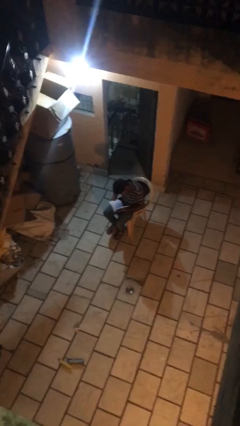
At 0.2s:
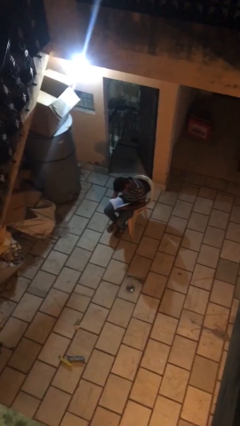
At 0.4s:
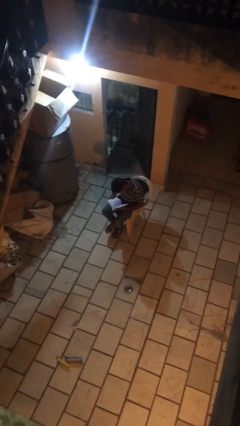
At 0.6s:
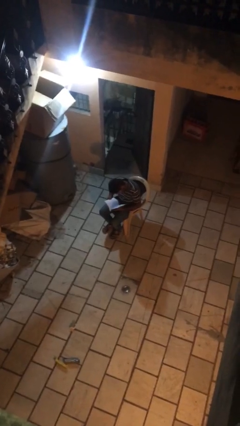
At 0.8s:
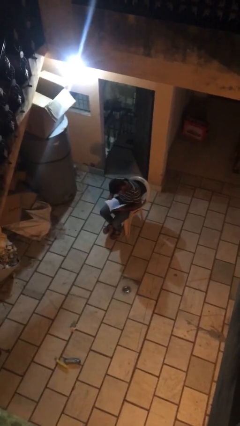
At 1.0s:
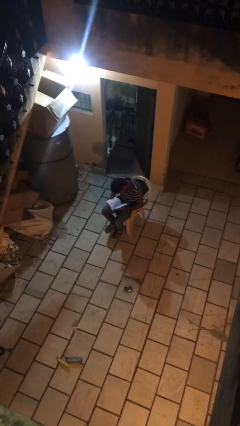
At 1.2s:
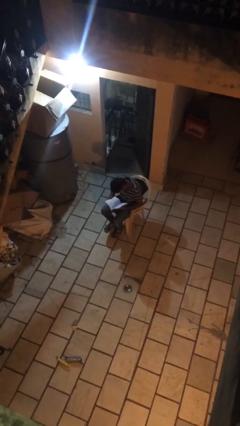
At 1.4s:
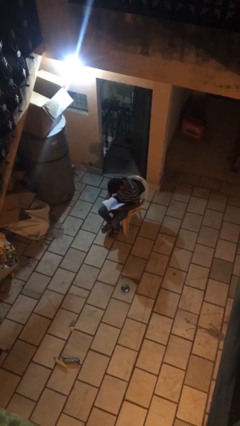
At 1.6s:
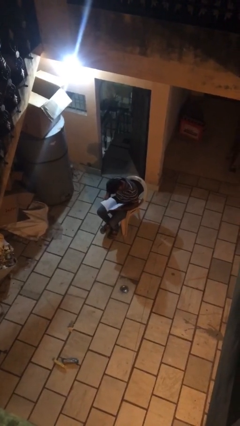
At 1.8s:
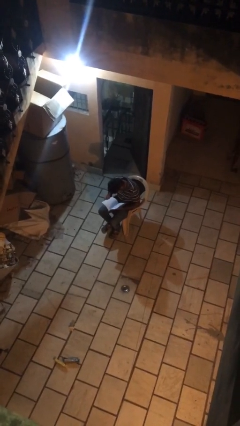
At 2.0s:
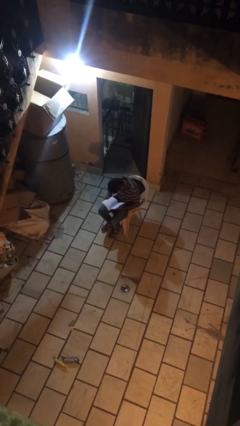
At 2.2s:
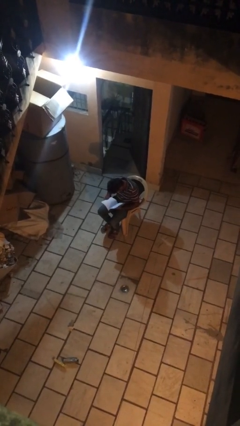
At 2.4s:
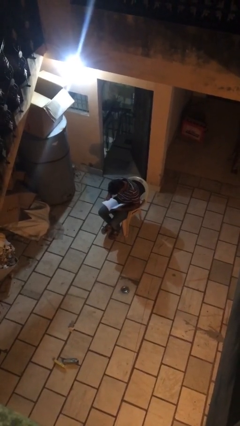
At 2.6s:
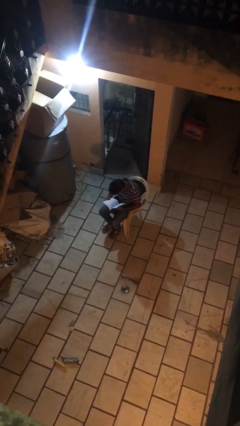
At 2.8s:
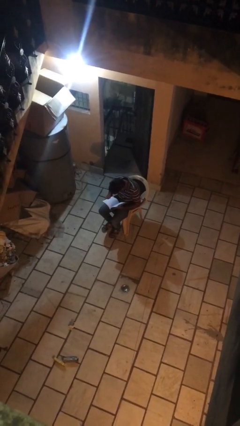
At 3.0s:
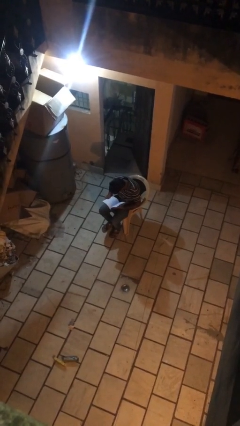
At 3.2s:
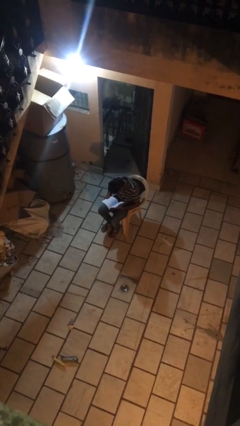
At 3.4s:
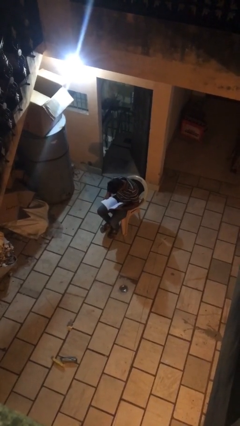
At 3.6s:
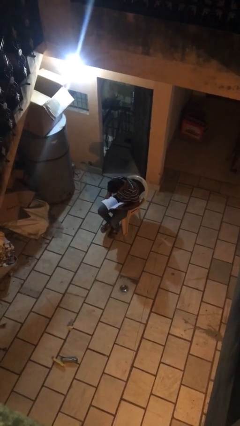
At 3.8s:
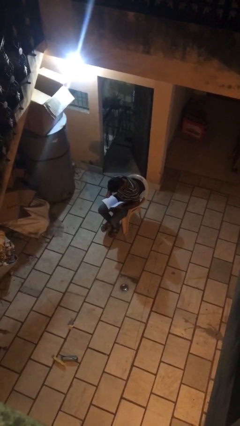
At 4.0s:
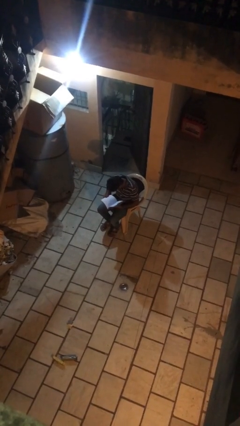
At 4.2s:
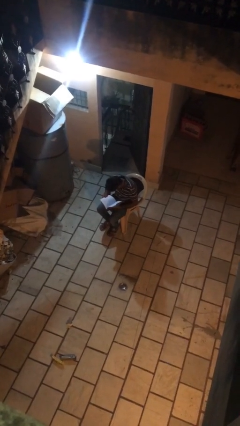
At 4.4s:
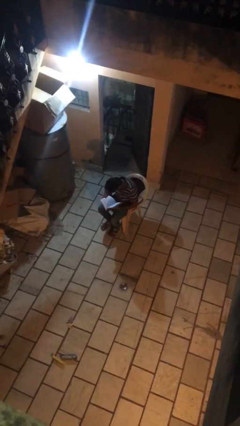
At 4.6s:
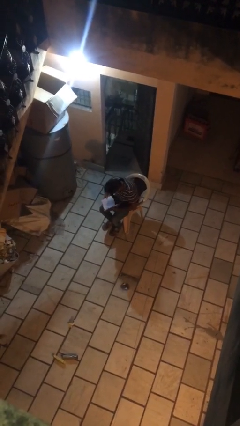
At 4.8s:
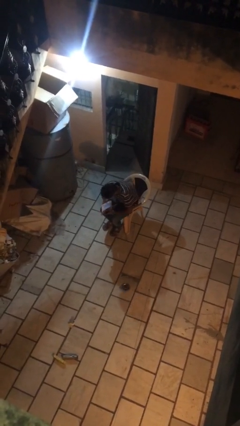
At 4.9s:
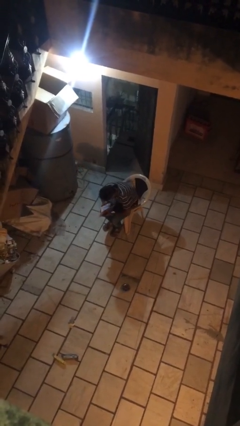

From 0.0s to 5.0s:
person reads document

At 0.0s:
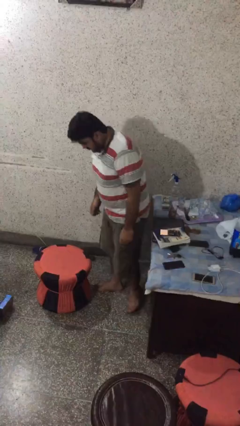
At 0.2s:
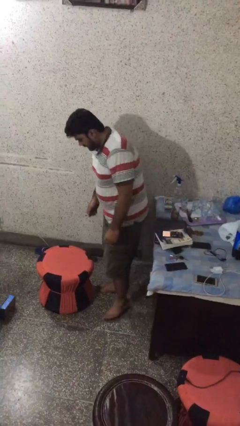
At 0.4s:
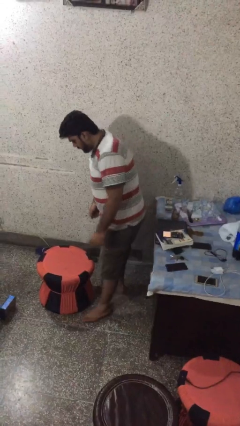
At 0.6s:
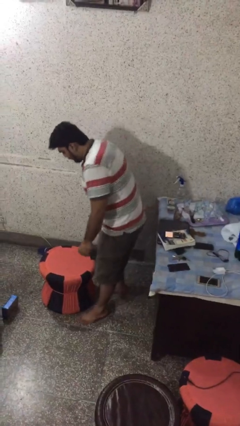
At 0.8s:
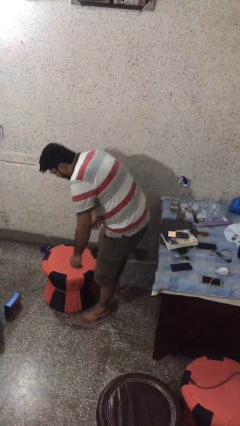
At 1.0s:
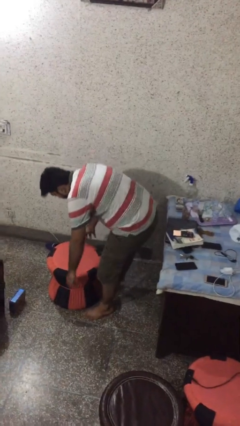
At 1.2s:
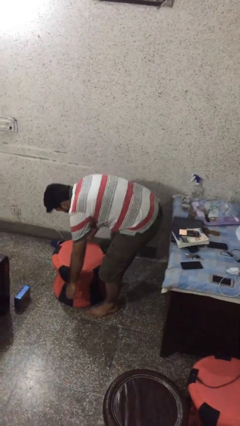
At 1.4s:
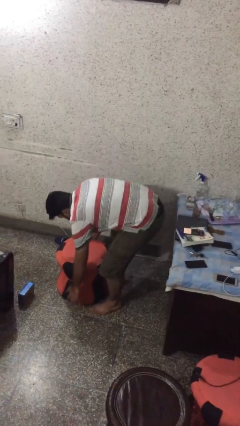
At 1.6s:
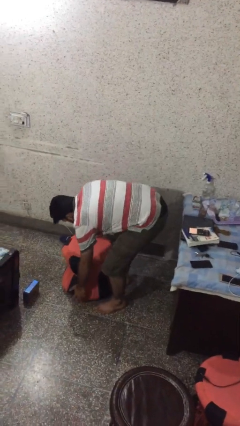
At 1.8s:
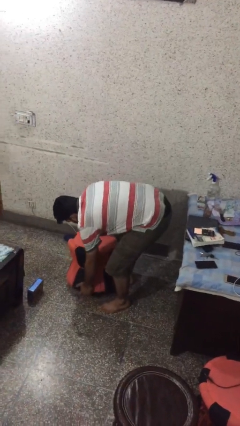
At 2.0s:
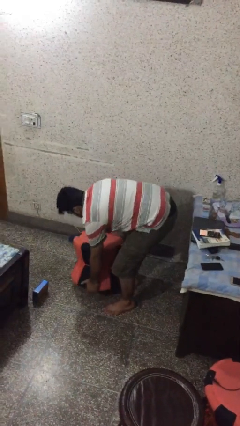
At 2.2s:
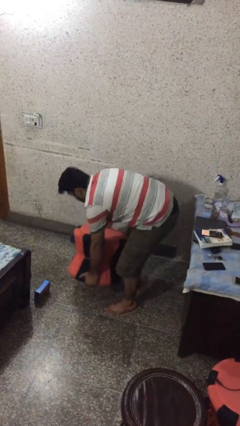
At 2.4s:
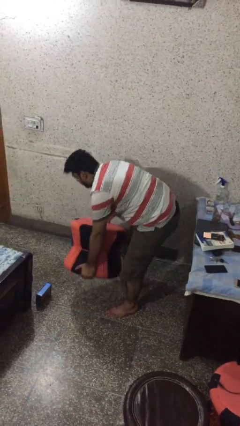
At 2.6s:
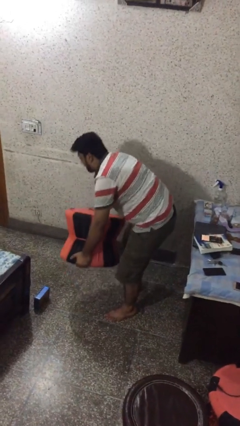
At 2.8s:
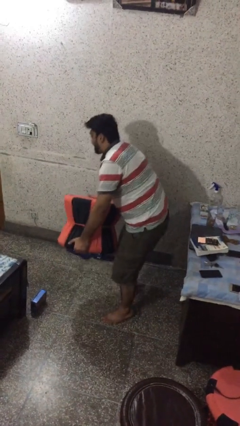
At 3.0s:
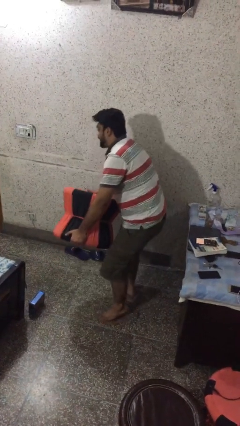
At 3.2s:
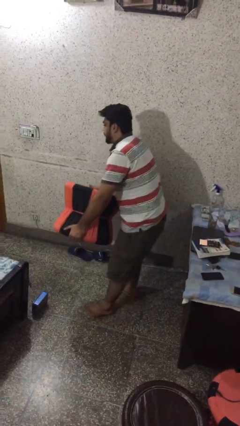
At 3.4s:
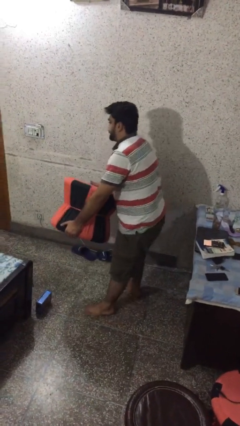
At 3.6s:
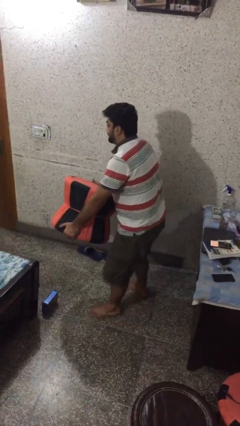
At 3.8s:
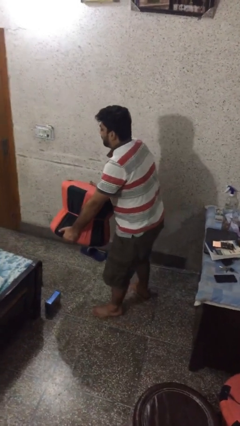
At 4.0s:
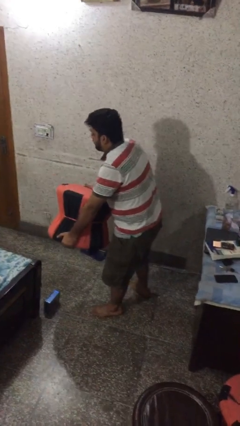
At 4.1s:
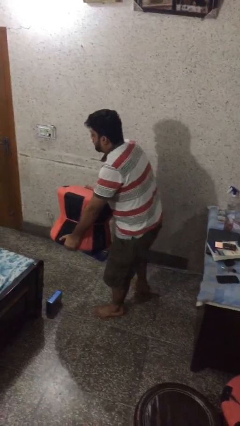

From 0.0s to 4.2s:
person picks up object from floor

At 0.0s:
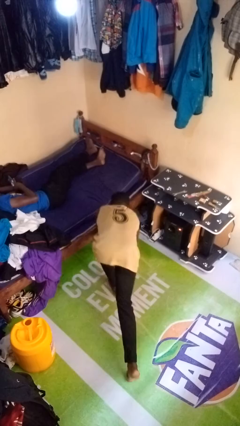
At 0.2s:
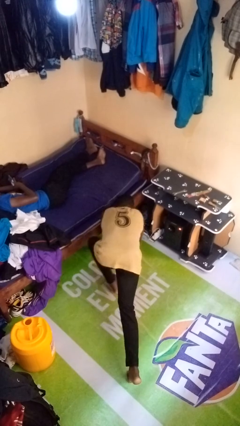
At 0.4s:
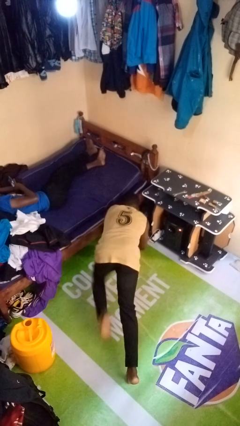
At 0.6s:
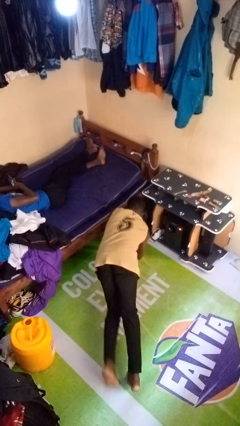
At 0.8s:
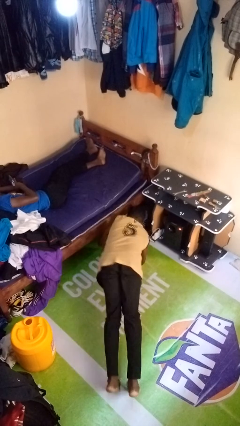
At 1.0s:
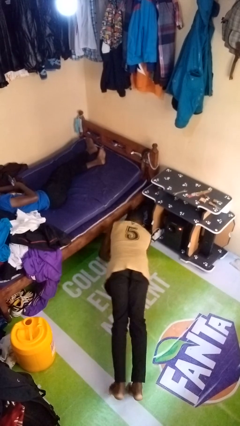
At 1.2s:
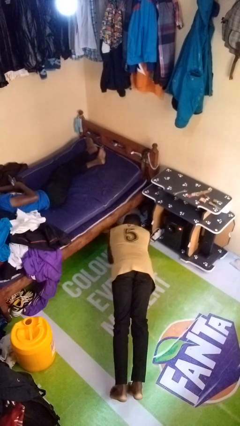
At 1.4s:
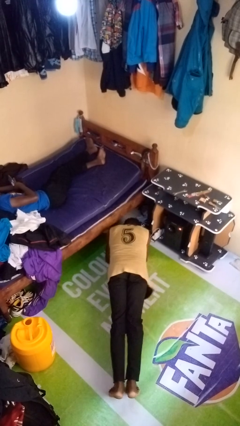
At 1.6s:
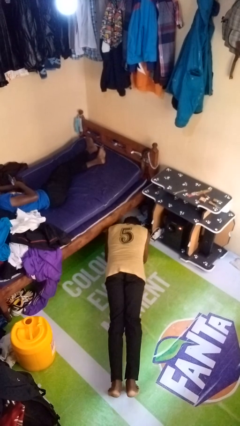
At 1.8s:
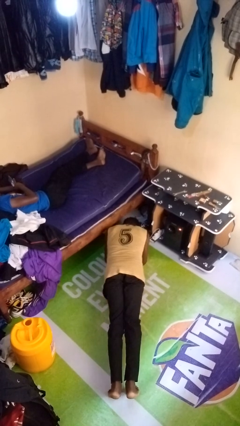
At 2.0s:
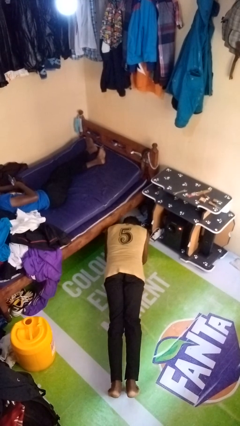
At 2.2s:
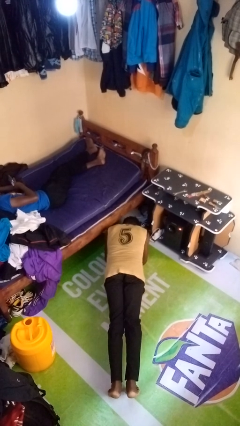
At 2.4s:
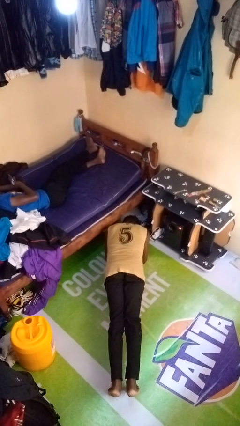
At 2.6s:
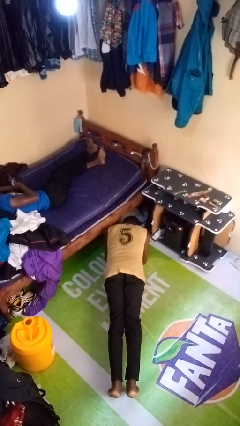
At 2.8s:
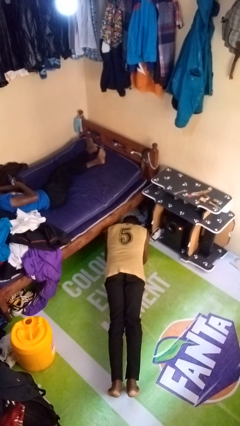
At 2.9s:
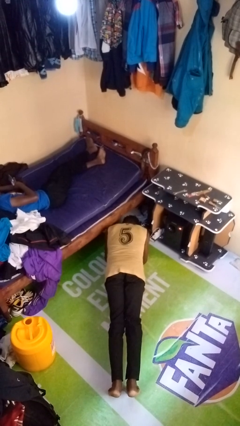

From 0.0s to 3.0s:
person exercises with plank

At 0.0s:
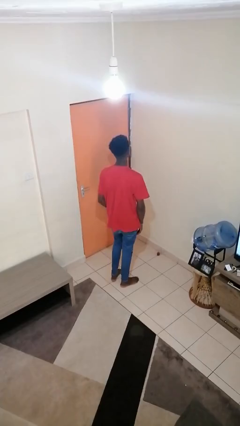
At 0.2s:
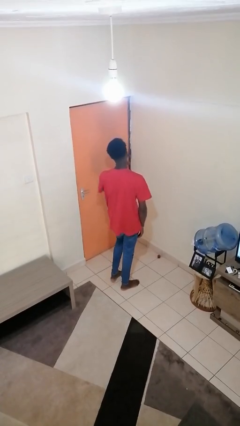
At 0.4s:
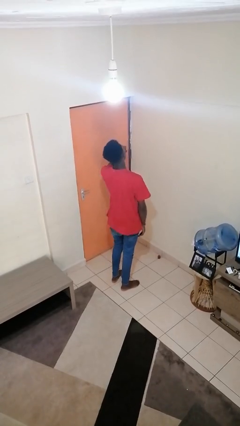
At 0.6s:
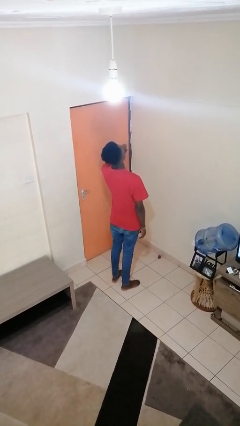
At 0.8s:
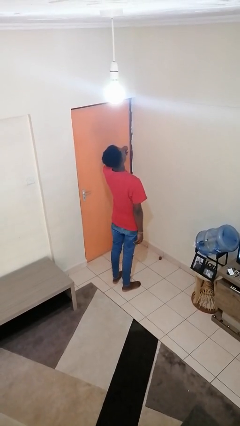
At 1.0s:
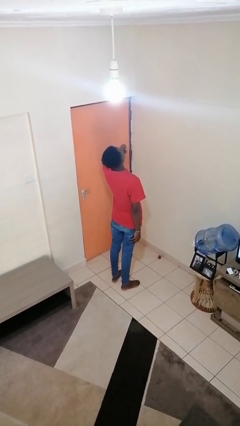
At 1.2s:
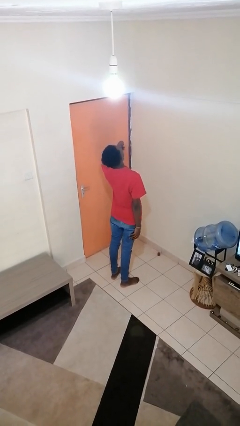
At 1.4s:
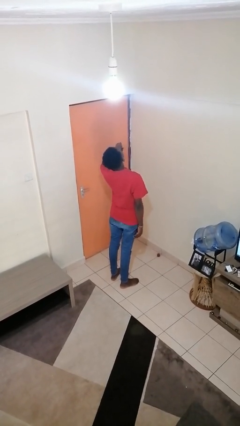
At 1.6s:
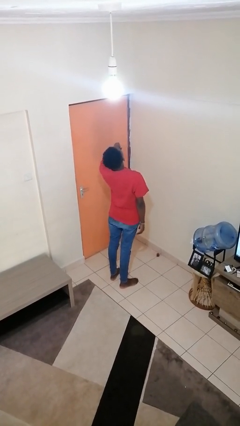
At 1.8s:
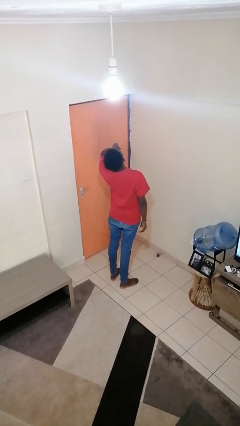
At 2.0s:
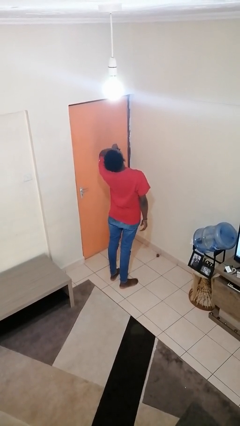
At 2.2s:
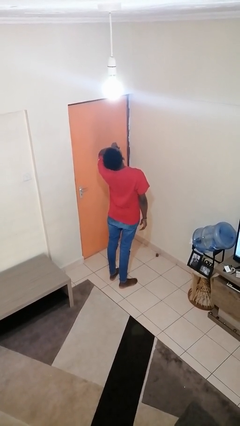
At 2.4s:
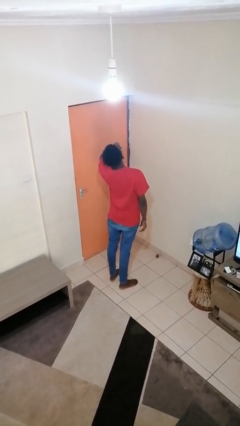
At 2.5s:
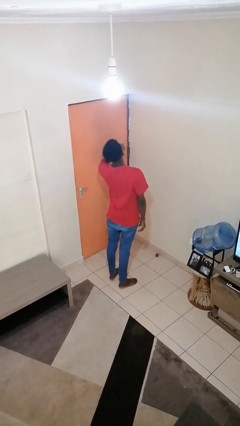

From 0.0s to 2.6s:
person yawns

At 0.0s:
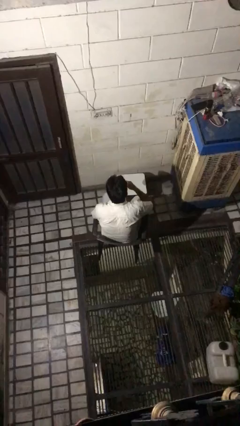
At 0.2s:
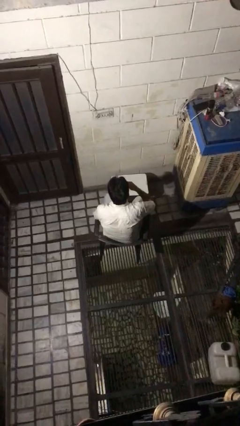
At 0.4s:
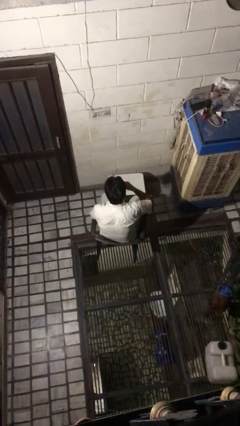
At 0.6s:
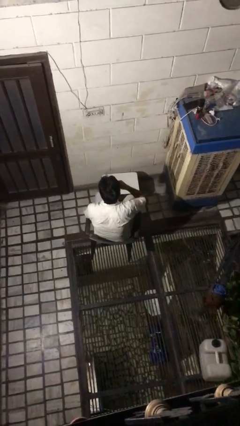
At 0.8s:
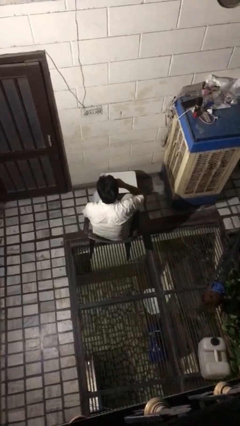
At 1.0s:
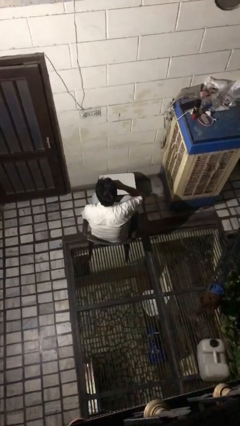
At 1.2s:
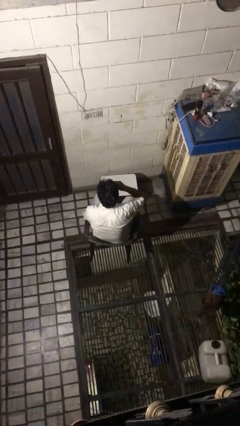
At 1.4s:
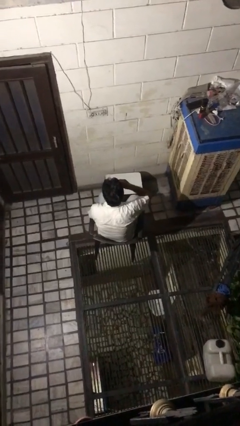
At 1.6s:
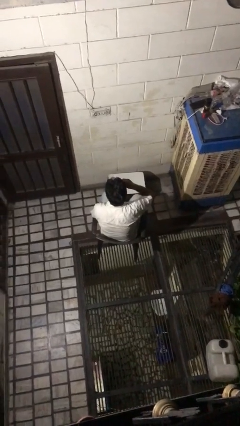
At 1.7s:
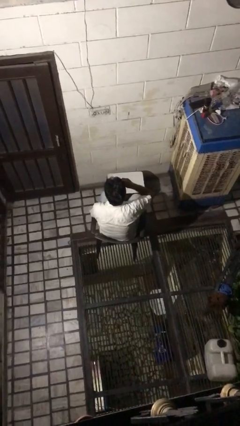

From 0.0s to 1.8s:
person drinks from mug

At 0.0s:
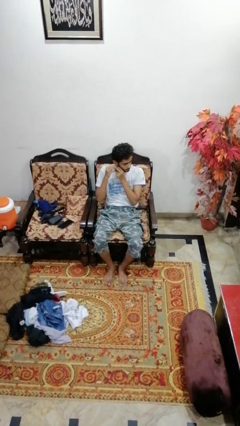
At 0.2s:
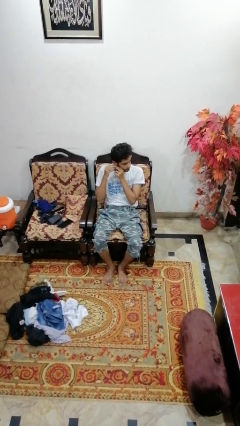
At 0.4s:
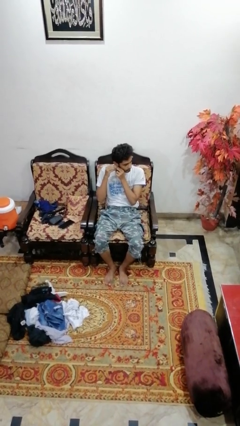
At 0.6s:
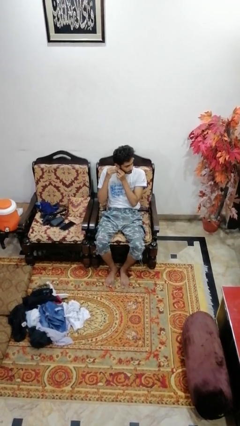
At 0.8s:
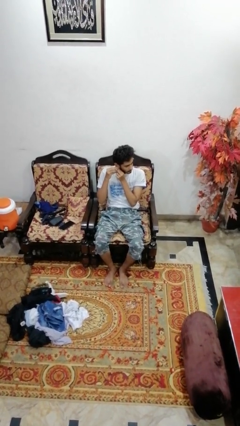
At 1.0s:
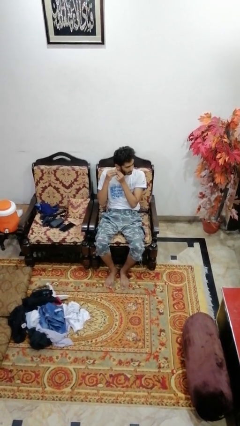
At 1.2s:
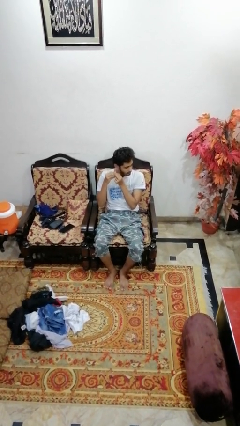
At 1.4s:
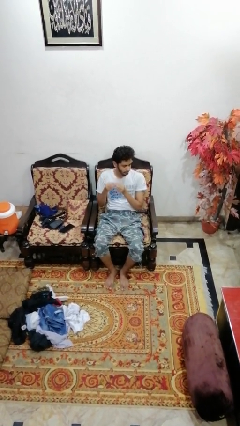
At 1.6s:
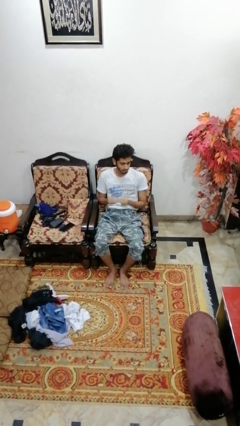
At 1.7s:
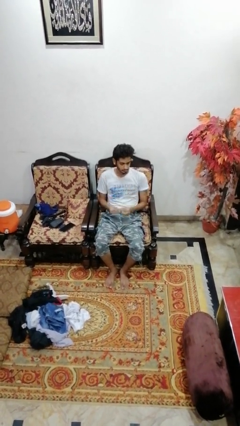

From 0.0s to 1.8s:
person takes off earrings
